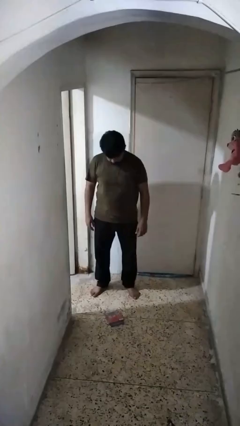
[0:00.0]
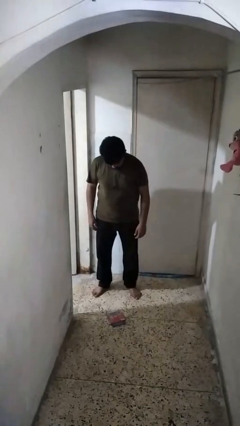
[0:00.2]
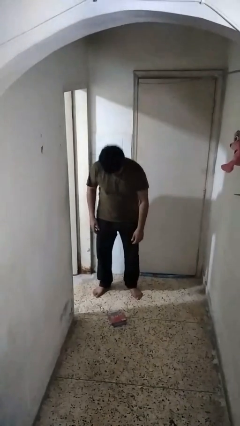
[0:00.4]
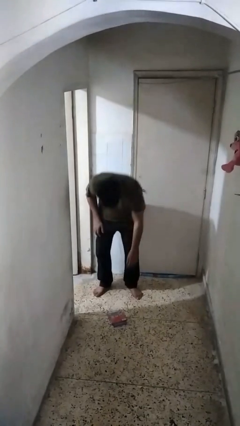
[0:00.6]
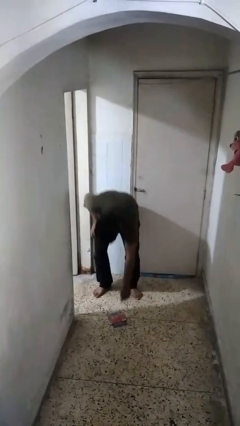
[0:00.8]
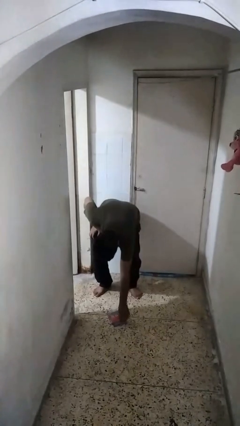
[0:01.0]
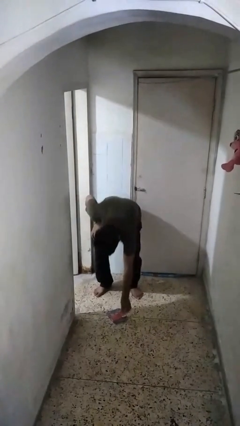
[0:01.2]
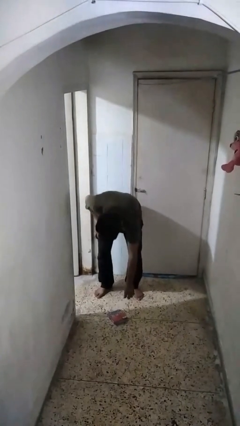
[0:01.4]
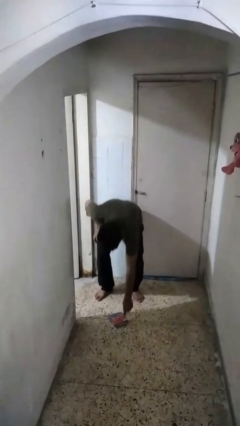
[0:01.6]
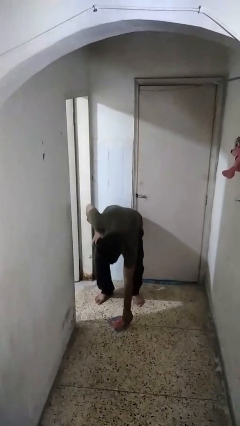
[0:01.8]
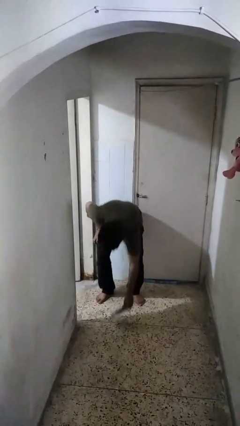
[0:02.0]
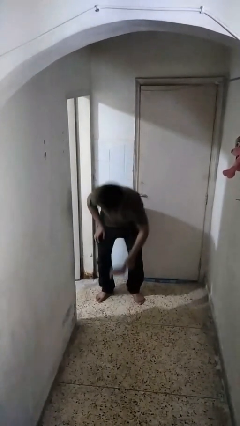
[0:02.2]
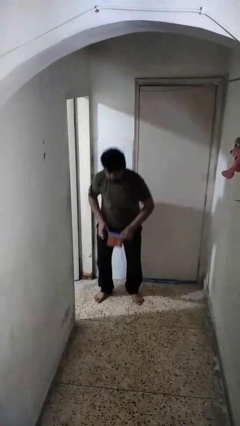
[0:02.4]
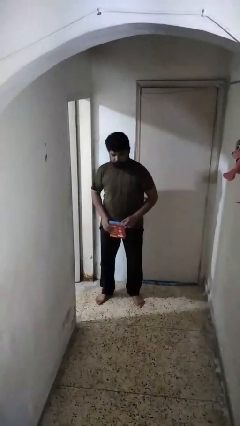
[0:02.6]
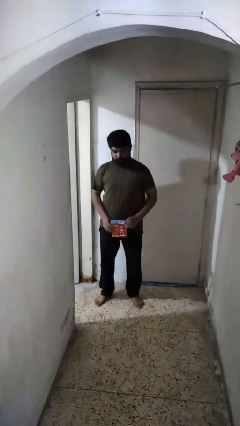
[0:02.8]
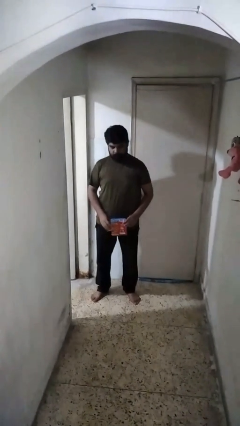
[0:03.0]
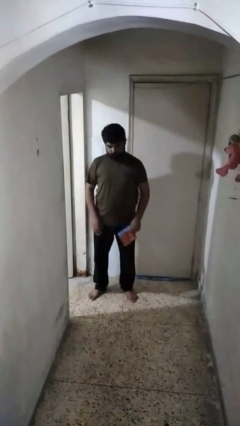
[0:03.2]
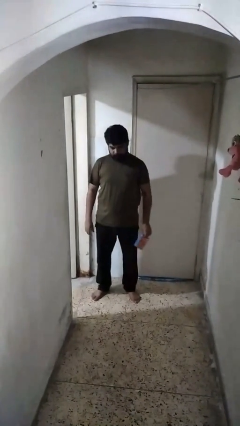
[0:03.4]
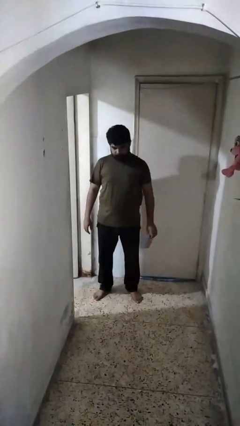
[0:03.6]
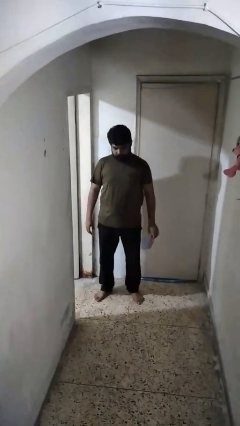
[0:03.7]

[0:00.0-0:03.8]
person picks up object from floor

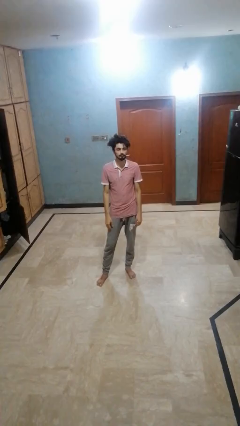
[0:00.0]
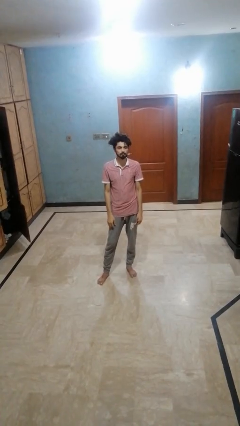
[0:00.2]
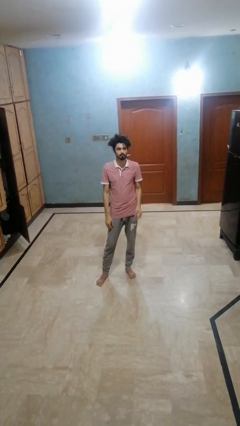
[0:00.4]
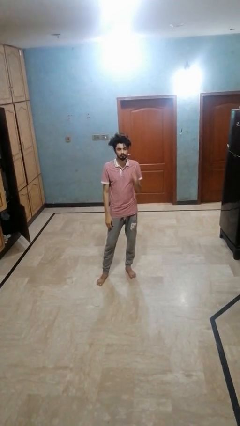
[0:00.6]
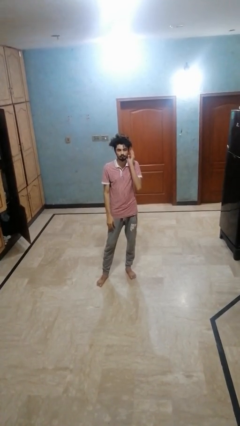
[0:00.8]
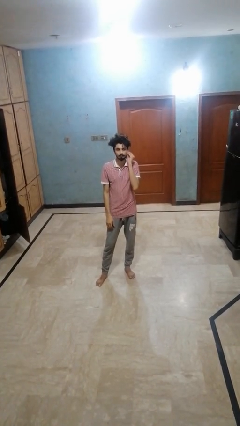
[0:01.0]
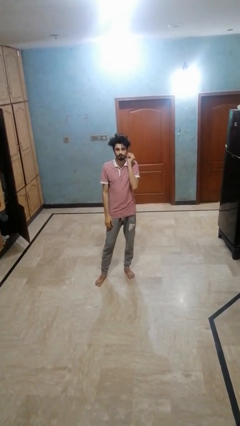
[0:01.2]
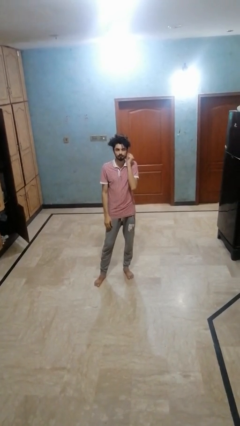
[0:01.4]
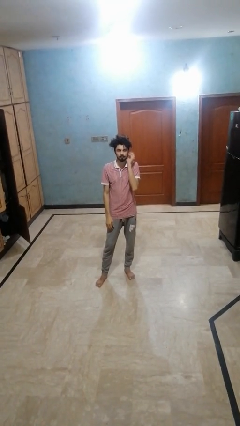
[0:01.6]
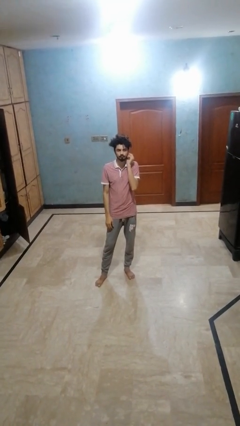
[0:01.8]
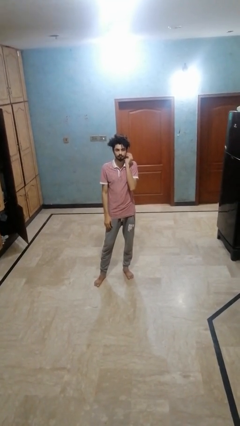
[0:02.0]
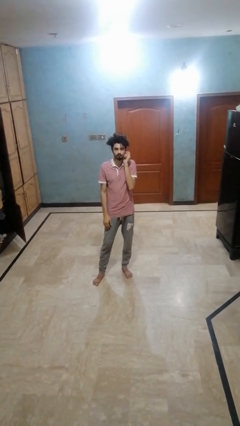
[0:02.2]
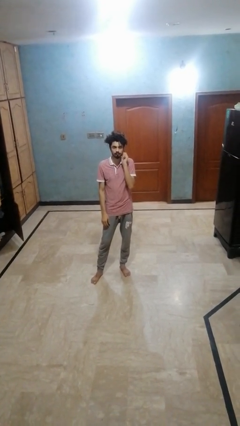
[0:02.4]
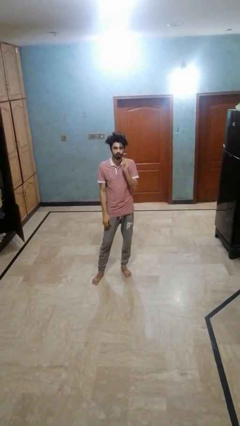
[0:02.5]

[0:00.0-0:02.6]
person touches earlobe

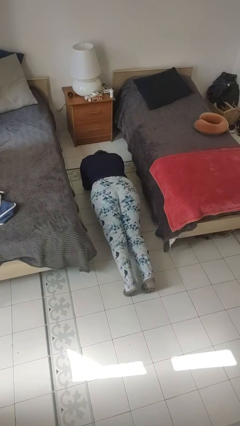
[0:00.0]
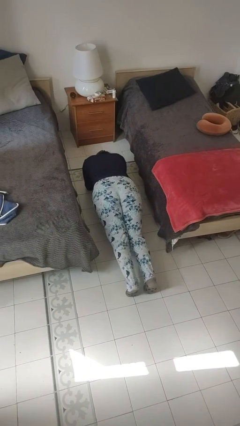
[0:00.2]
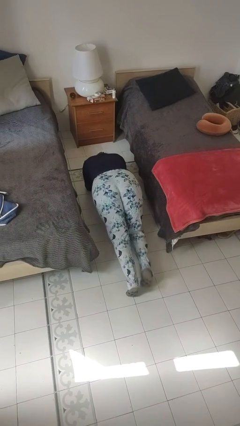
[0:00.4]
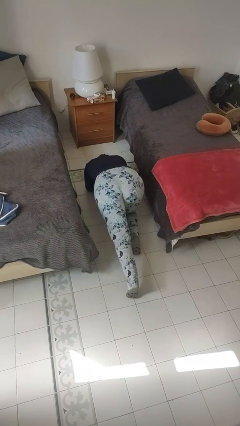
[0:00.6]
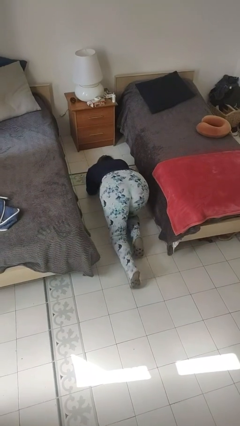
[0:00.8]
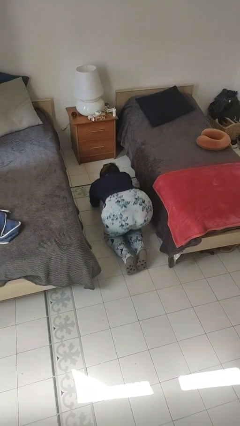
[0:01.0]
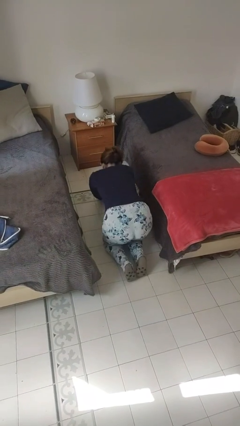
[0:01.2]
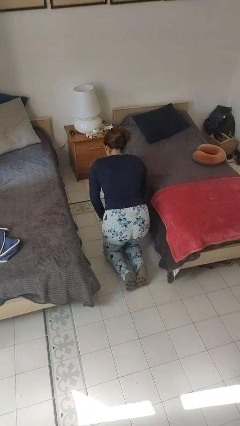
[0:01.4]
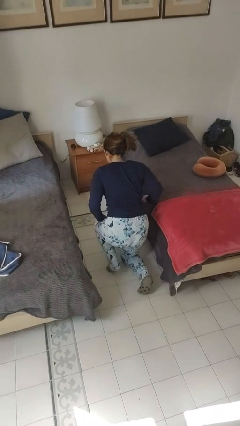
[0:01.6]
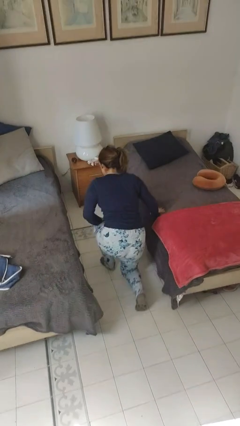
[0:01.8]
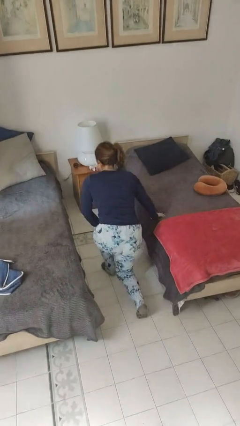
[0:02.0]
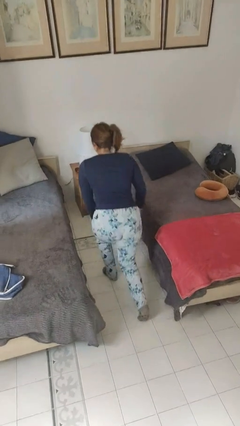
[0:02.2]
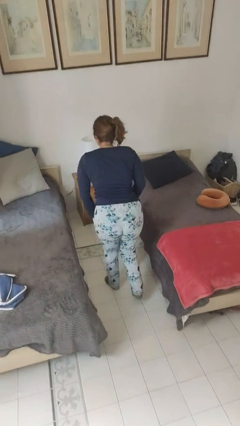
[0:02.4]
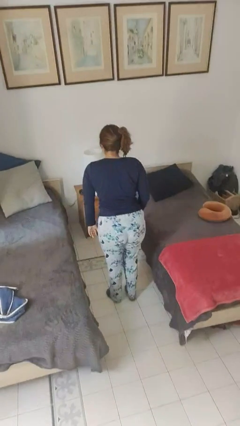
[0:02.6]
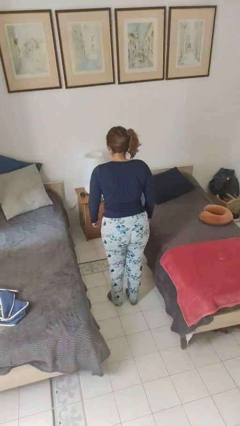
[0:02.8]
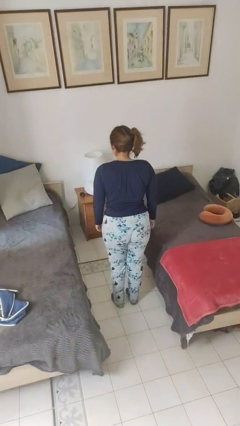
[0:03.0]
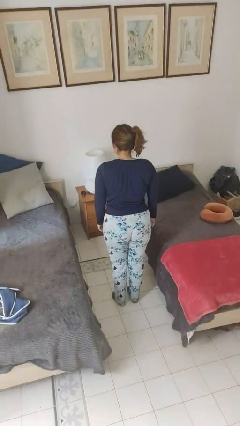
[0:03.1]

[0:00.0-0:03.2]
person stands up from floor

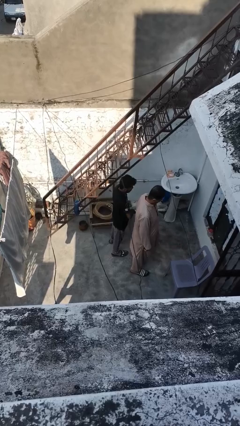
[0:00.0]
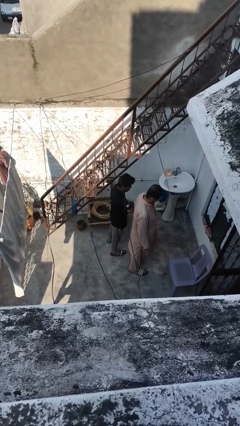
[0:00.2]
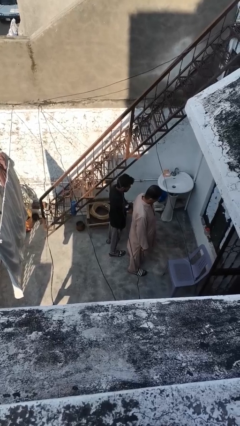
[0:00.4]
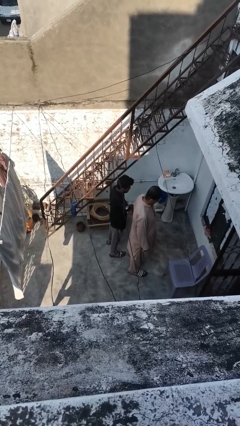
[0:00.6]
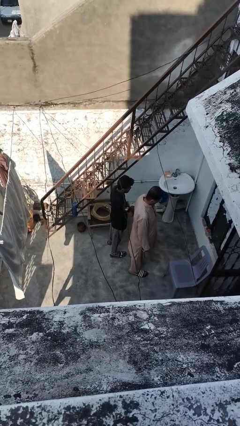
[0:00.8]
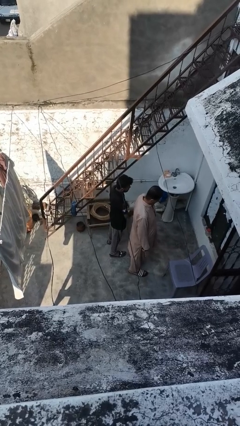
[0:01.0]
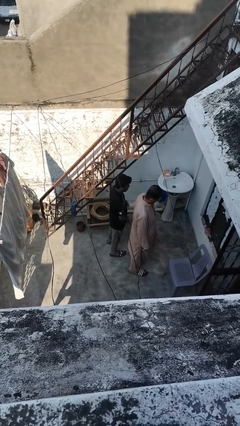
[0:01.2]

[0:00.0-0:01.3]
person nudges person with elbow

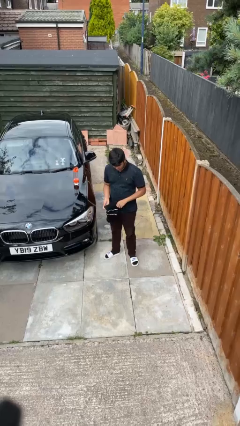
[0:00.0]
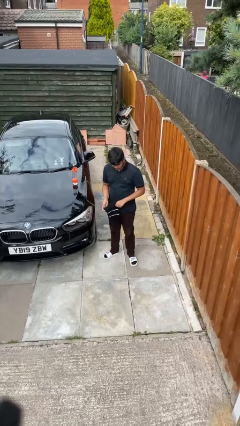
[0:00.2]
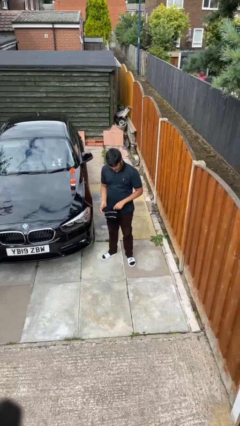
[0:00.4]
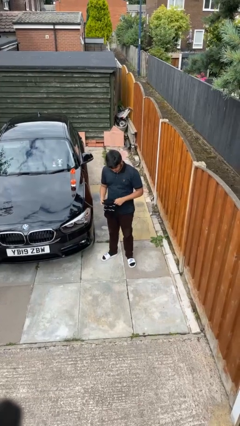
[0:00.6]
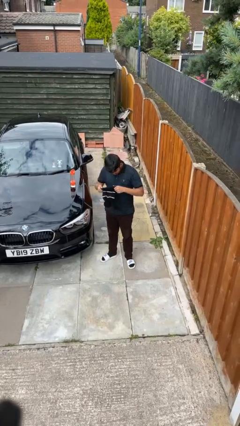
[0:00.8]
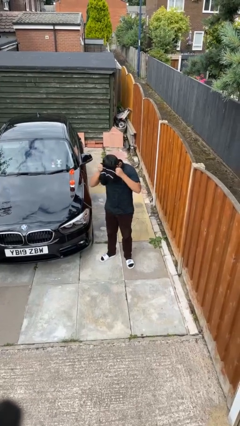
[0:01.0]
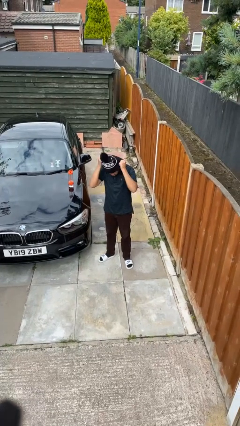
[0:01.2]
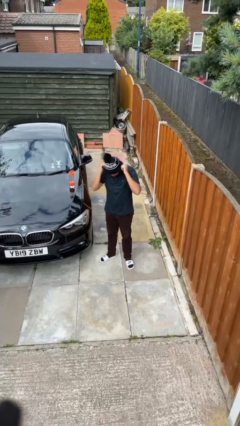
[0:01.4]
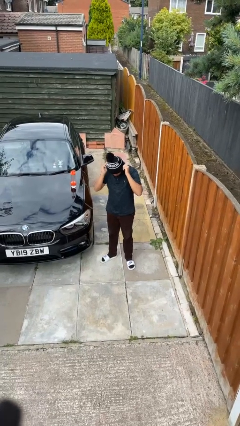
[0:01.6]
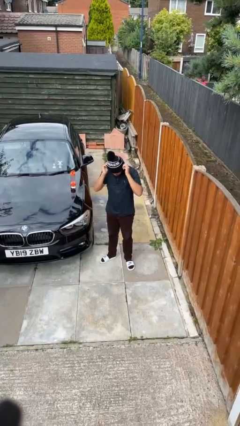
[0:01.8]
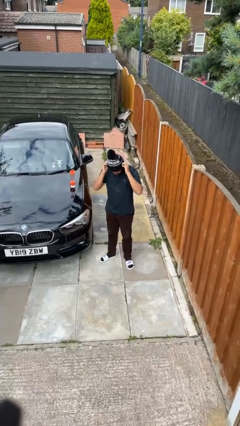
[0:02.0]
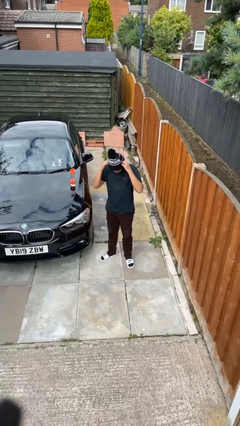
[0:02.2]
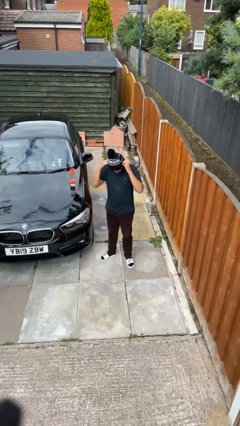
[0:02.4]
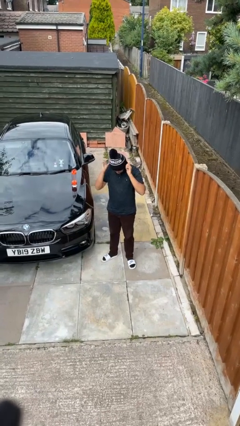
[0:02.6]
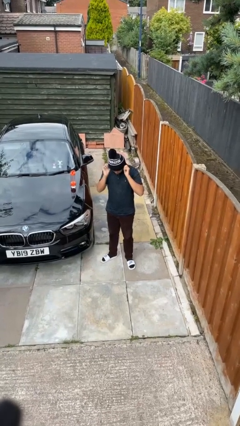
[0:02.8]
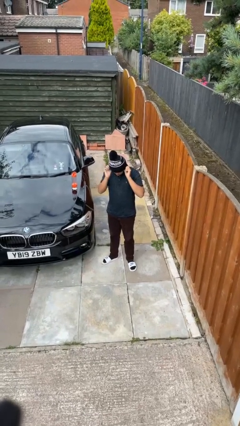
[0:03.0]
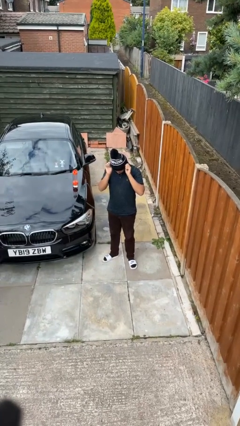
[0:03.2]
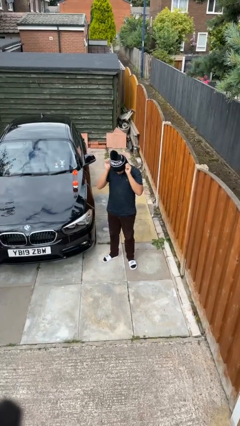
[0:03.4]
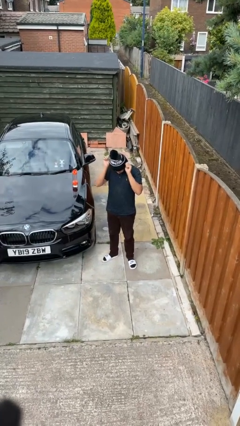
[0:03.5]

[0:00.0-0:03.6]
person puts on hat

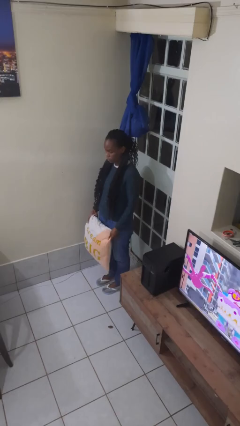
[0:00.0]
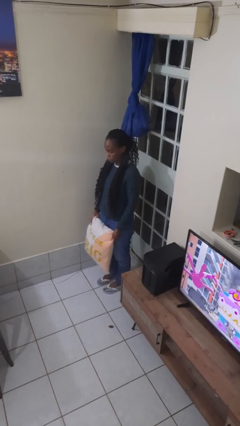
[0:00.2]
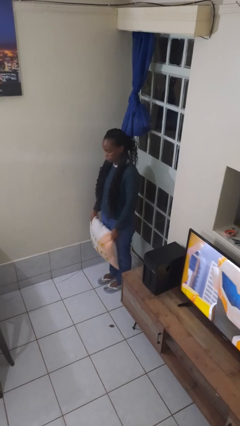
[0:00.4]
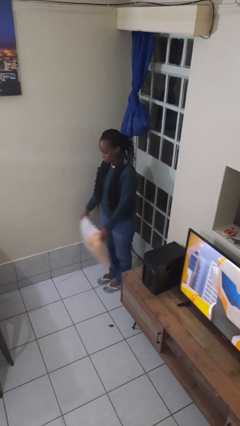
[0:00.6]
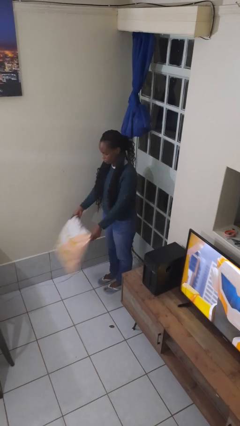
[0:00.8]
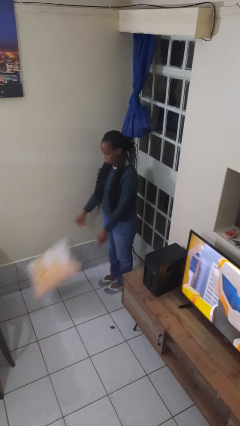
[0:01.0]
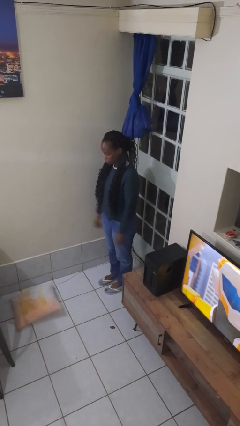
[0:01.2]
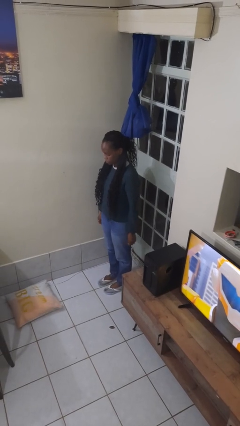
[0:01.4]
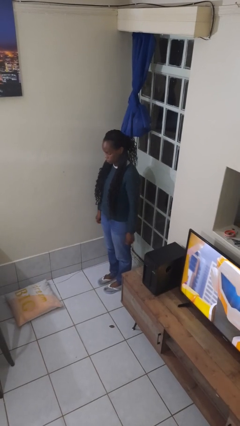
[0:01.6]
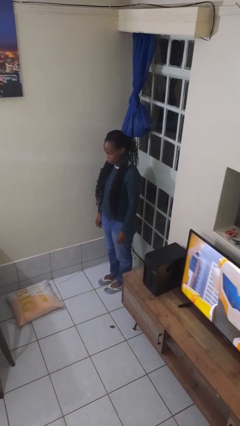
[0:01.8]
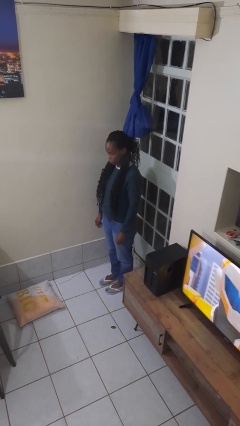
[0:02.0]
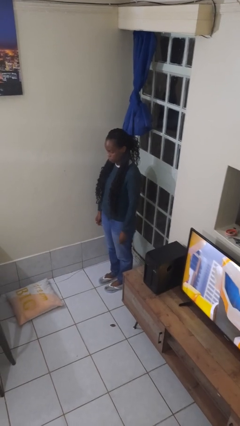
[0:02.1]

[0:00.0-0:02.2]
person throws object to ground

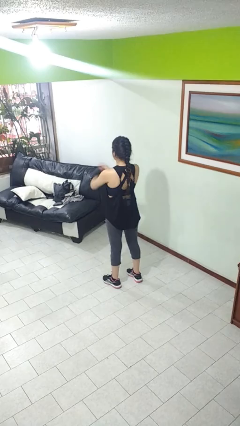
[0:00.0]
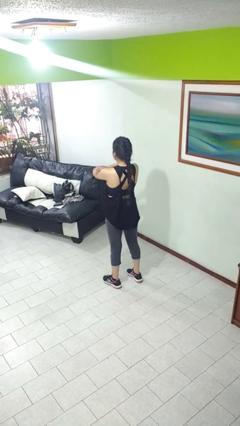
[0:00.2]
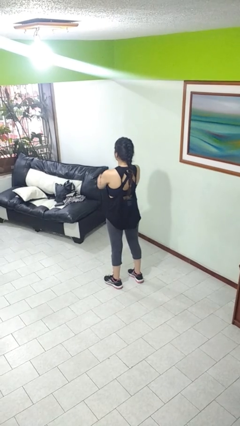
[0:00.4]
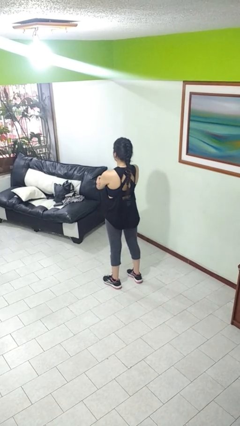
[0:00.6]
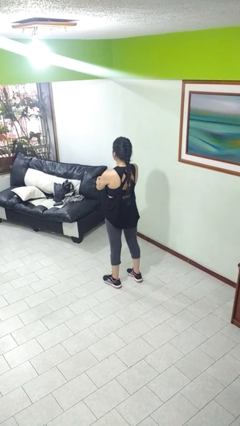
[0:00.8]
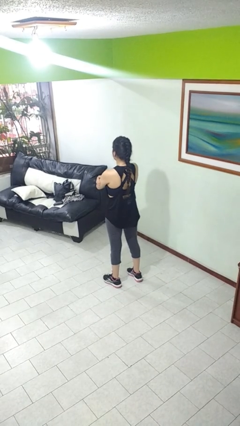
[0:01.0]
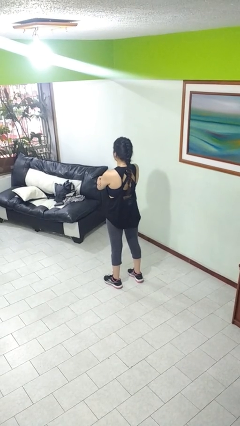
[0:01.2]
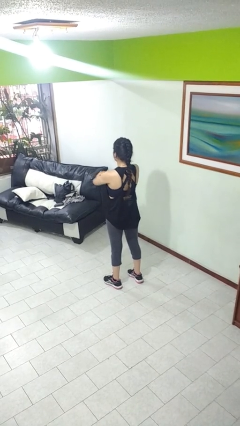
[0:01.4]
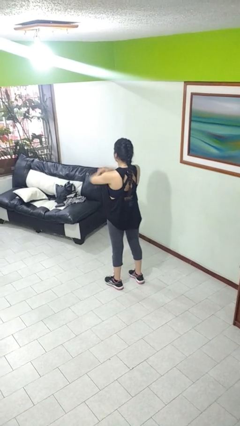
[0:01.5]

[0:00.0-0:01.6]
person crosses arms
